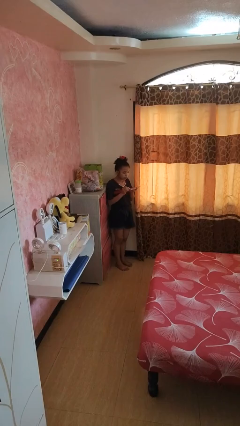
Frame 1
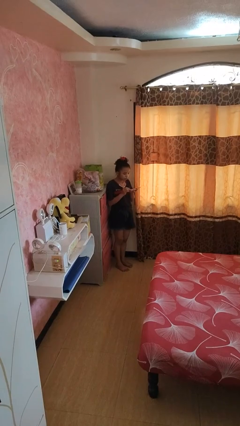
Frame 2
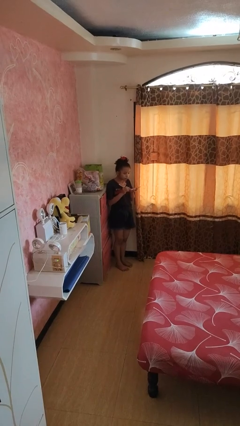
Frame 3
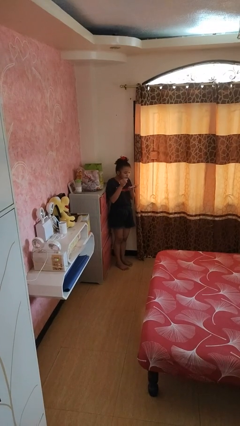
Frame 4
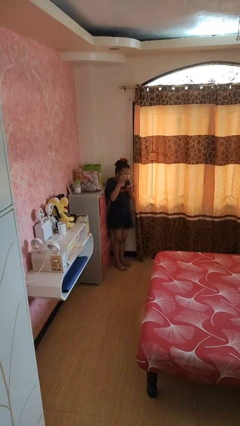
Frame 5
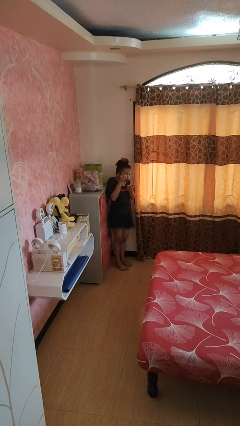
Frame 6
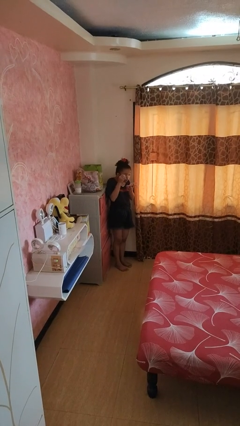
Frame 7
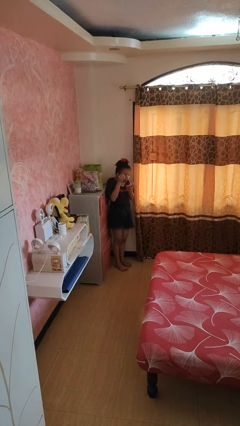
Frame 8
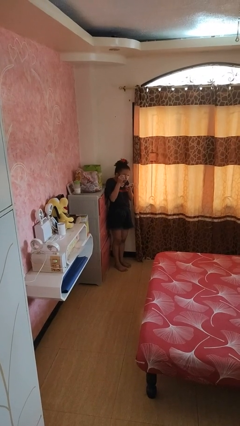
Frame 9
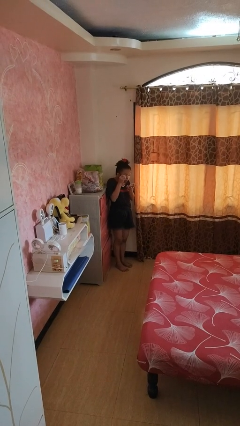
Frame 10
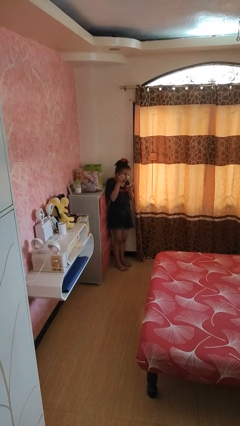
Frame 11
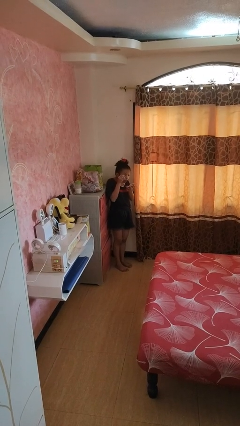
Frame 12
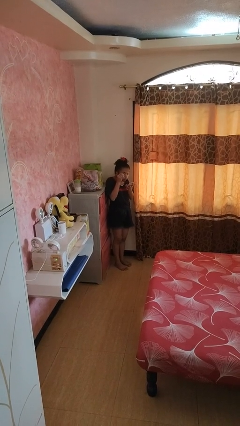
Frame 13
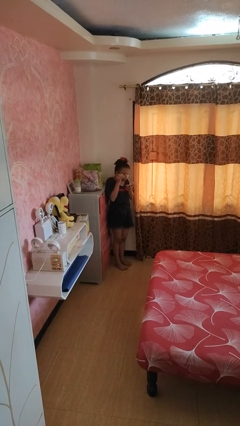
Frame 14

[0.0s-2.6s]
person applies eye makeup

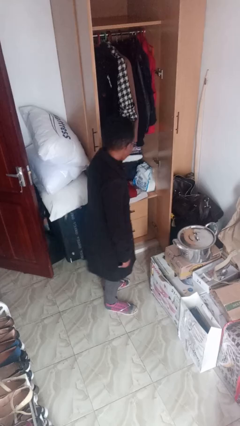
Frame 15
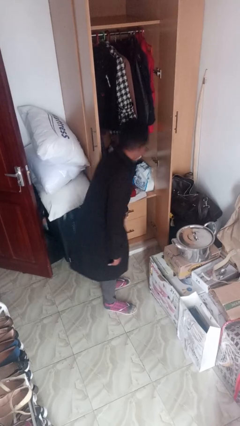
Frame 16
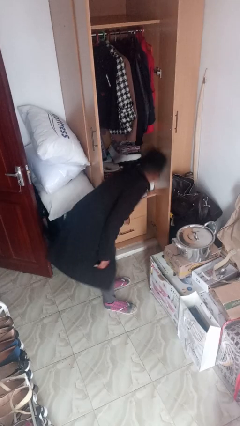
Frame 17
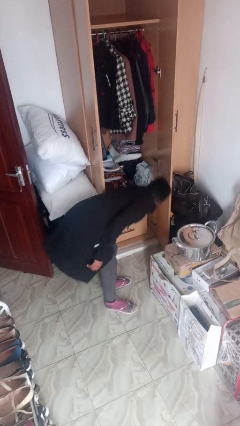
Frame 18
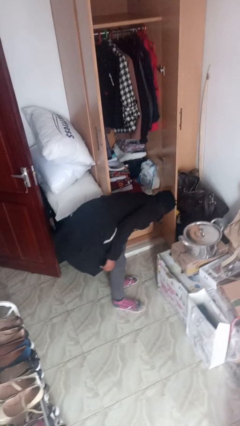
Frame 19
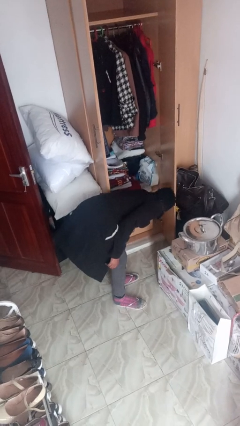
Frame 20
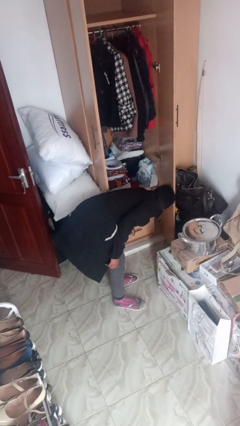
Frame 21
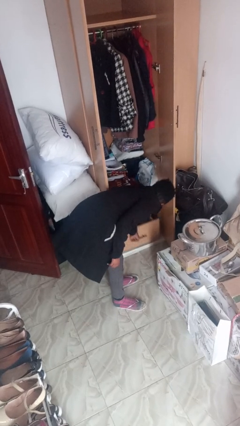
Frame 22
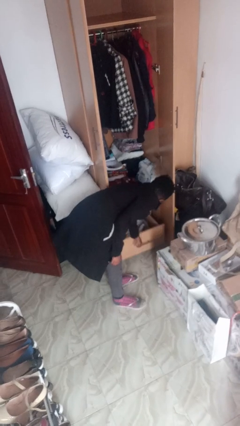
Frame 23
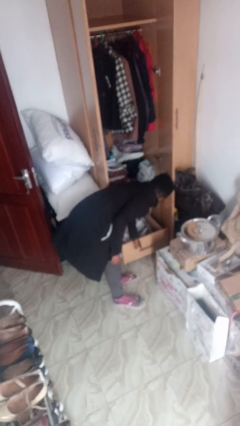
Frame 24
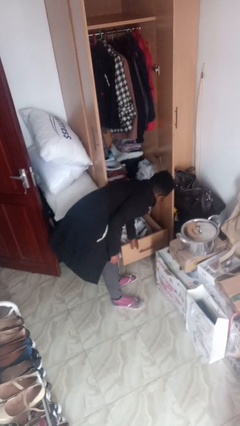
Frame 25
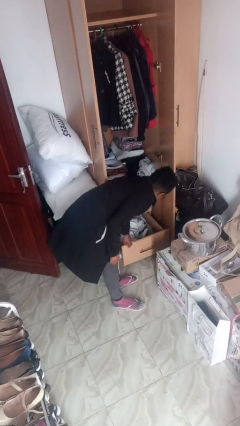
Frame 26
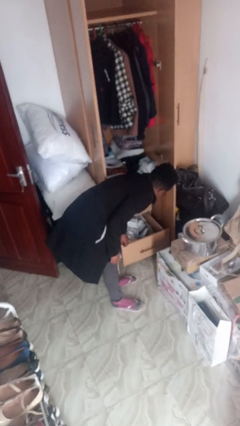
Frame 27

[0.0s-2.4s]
person opens dresser drawer

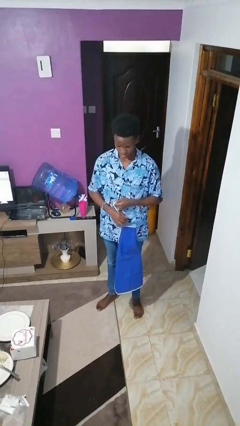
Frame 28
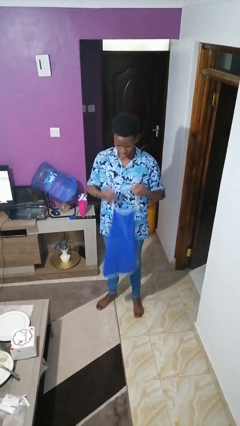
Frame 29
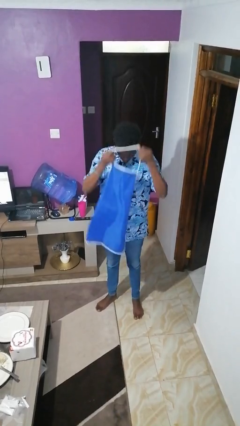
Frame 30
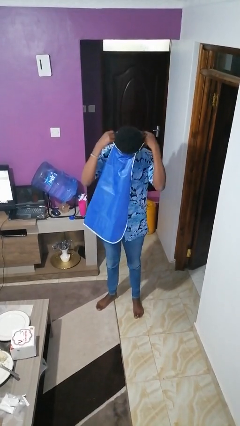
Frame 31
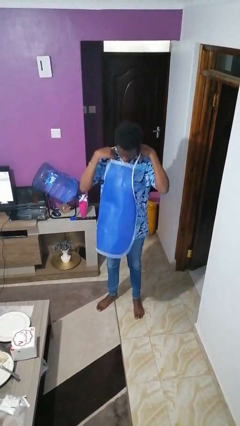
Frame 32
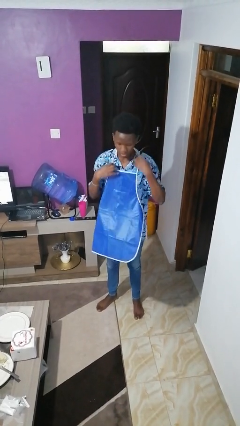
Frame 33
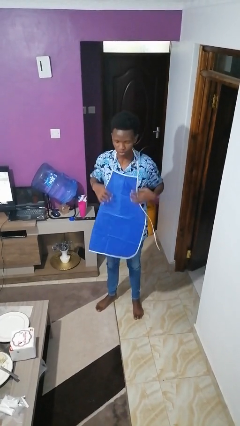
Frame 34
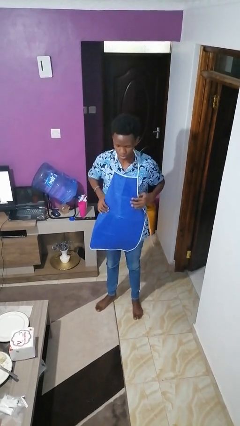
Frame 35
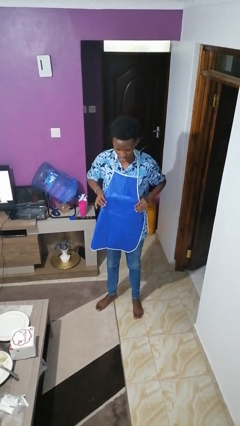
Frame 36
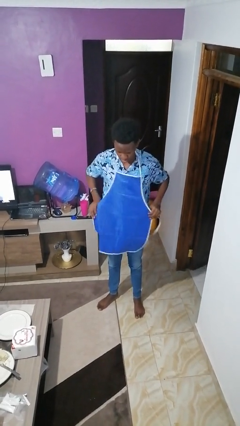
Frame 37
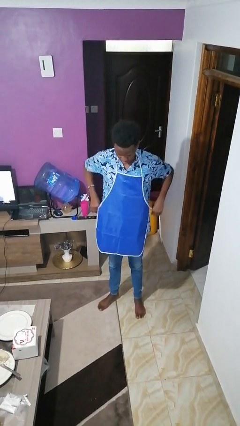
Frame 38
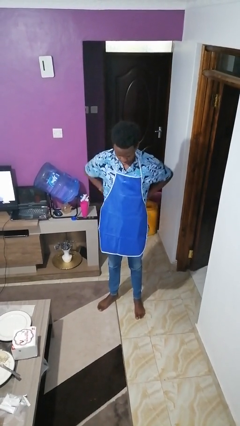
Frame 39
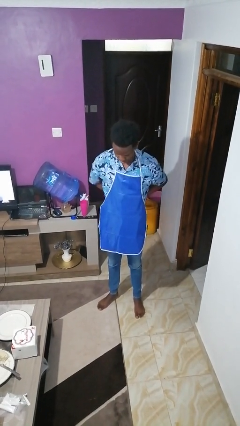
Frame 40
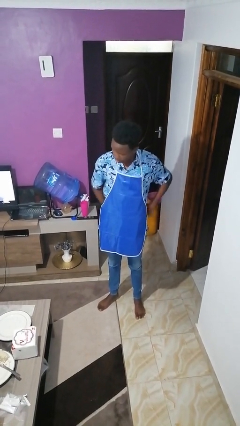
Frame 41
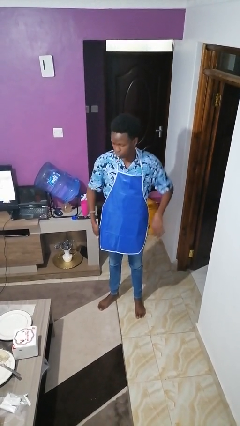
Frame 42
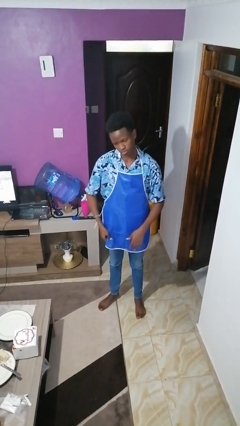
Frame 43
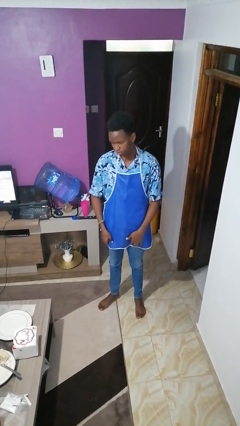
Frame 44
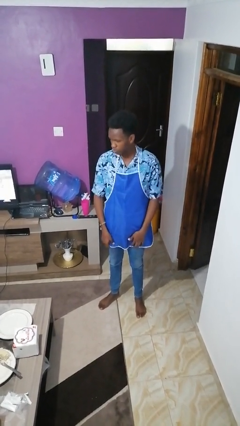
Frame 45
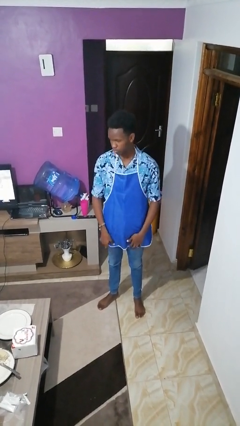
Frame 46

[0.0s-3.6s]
person puts on apron

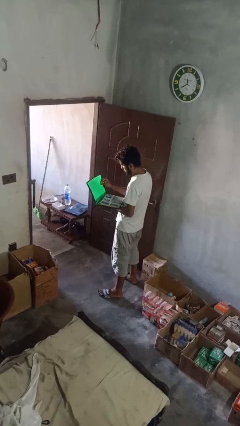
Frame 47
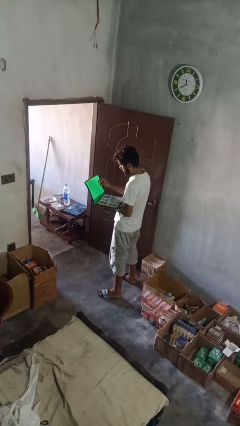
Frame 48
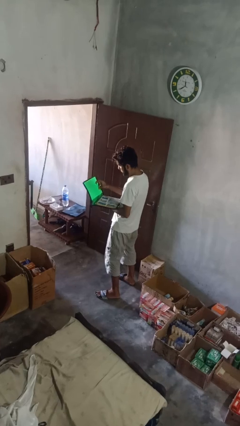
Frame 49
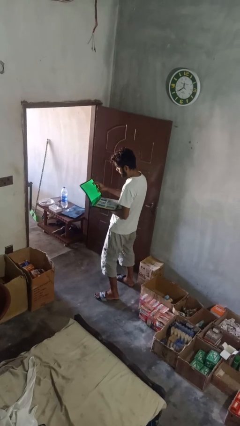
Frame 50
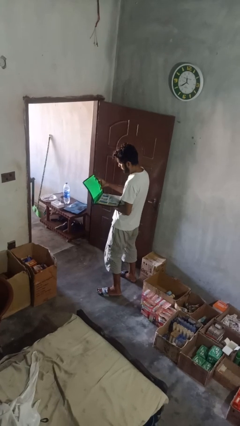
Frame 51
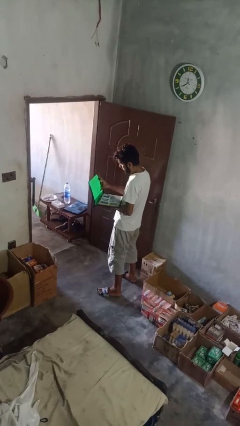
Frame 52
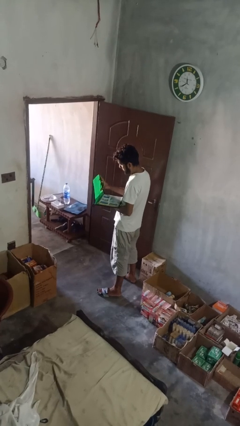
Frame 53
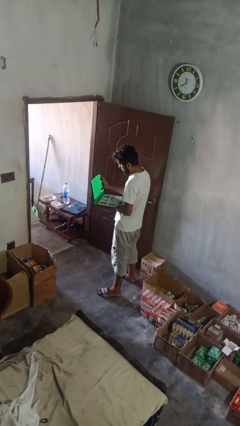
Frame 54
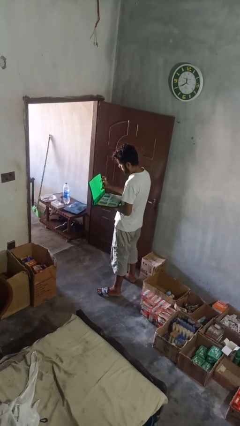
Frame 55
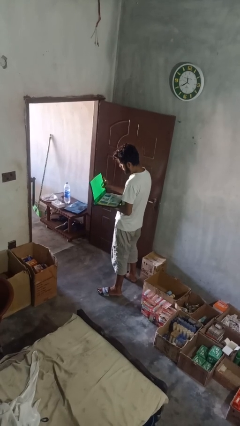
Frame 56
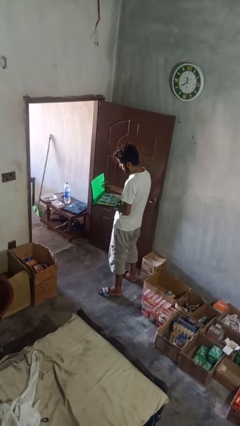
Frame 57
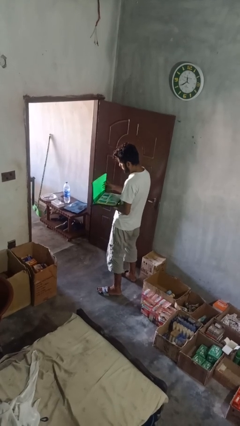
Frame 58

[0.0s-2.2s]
person opens laptop

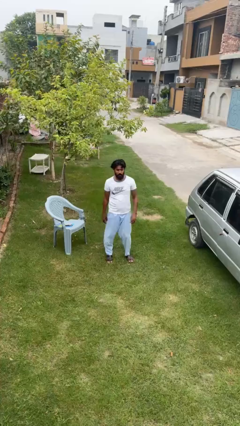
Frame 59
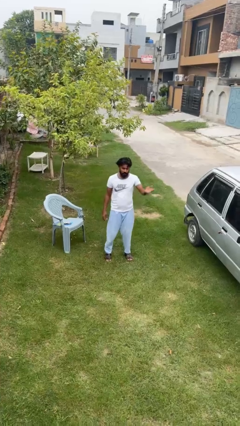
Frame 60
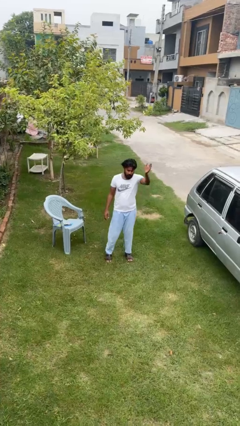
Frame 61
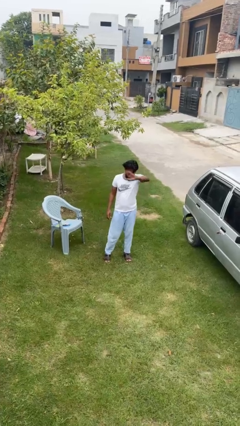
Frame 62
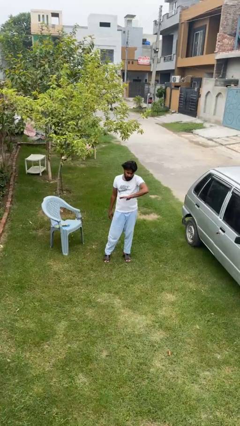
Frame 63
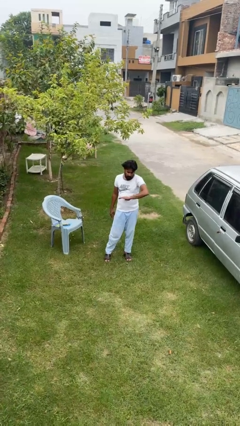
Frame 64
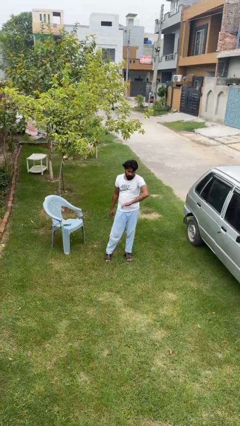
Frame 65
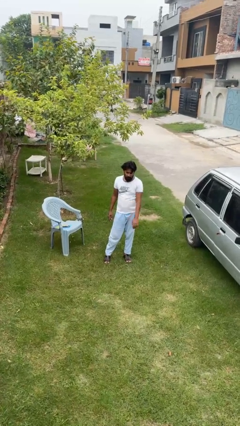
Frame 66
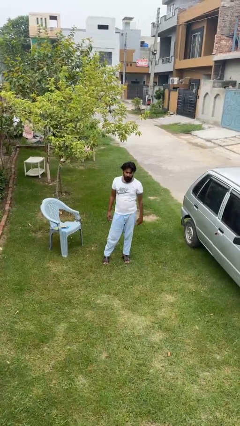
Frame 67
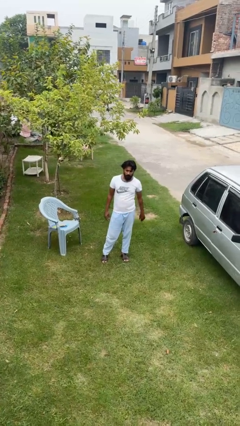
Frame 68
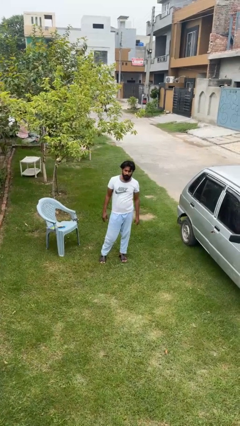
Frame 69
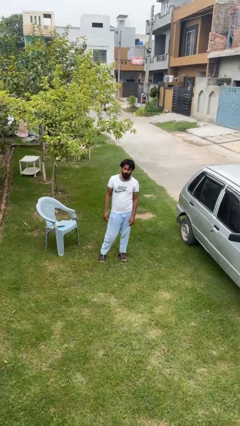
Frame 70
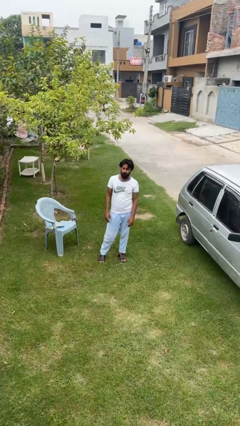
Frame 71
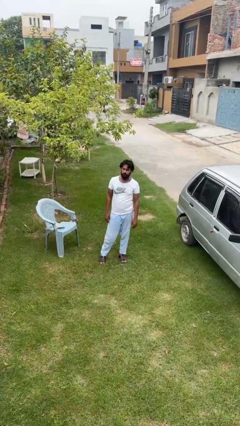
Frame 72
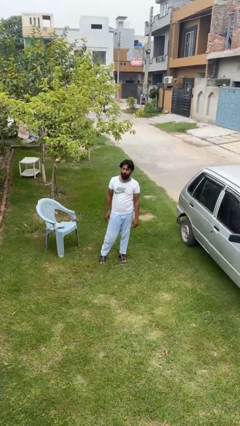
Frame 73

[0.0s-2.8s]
person gestures swipe down

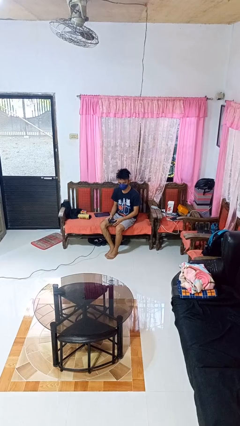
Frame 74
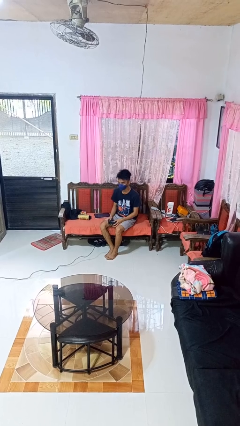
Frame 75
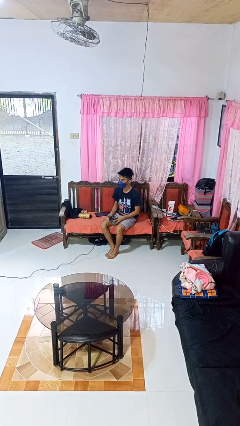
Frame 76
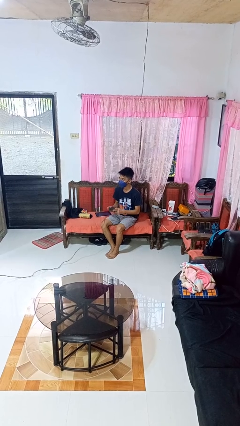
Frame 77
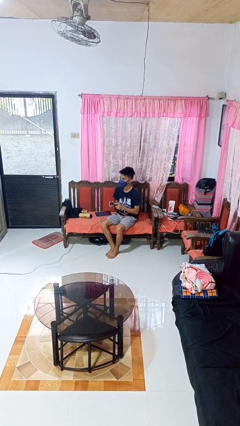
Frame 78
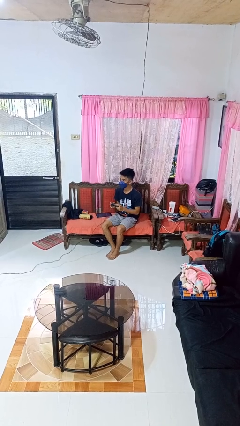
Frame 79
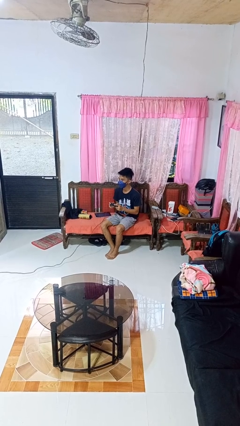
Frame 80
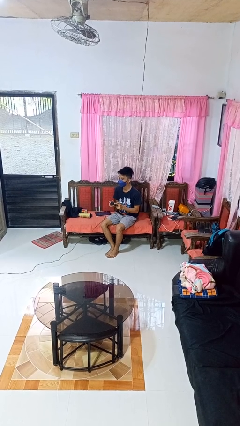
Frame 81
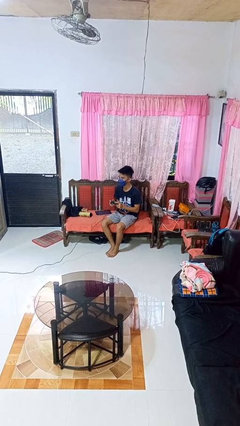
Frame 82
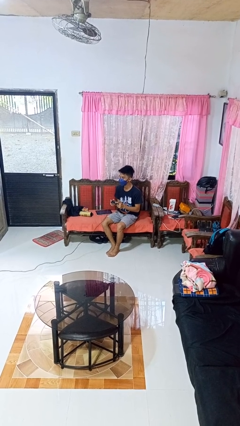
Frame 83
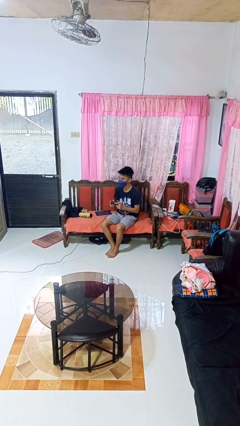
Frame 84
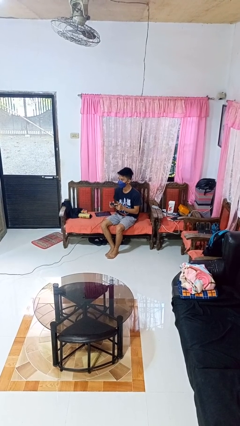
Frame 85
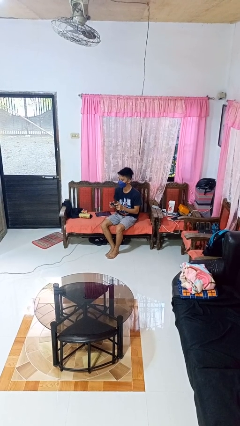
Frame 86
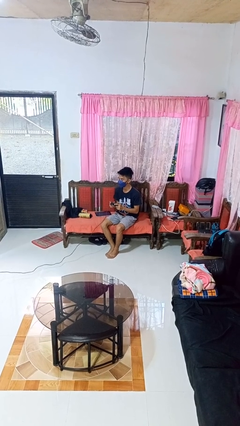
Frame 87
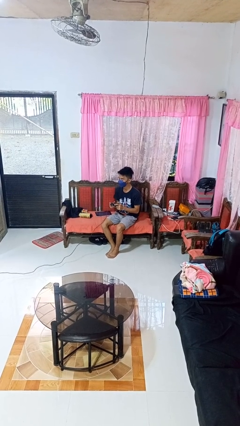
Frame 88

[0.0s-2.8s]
person interacts with handheld game

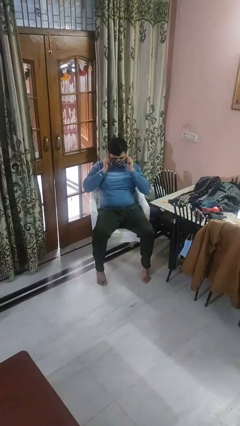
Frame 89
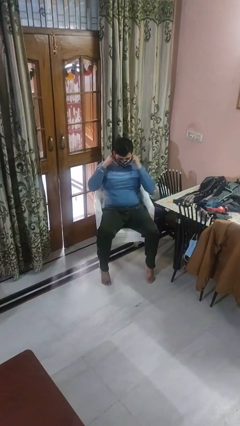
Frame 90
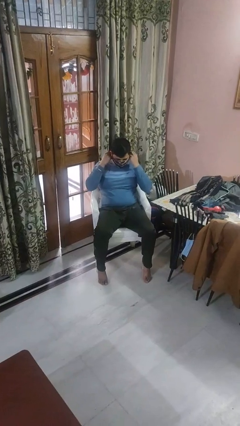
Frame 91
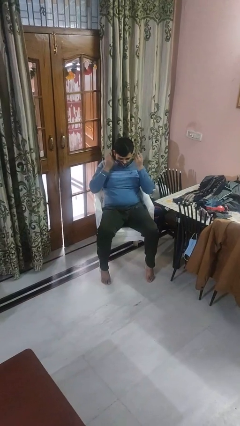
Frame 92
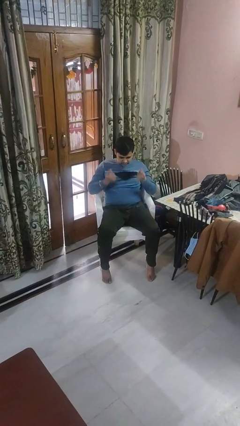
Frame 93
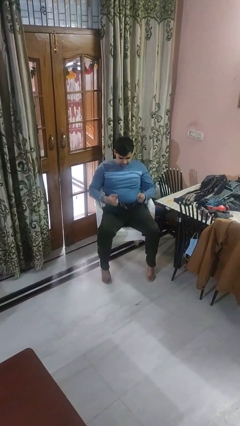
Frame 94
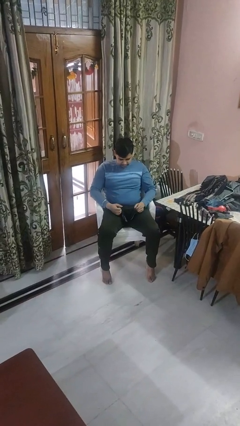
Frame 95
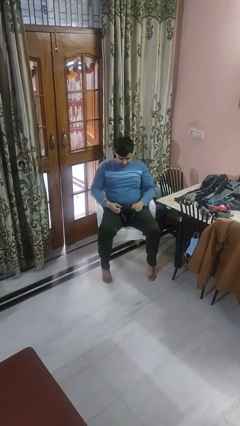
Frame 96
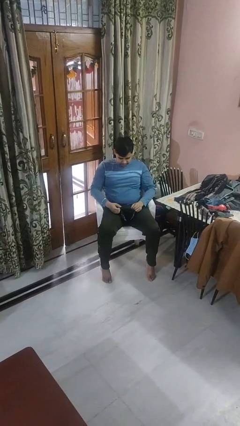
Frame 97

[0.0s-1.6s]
person takes off facemask
